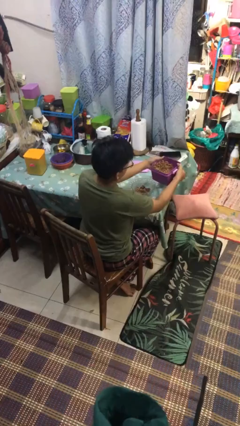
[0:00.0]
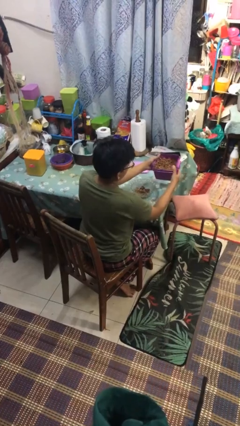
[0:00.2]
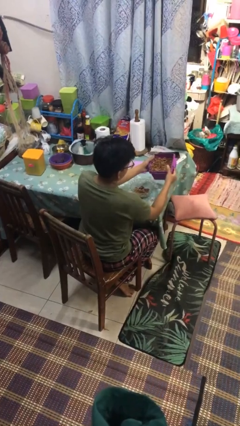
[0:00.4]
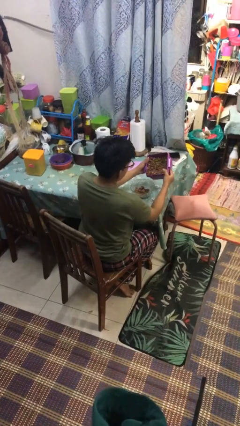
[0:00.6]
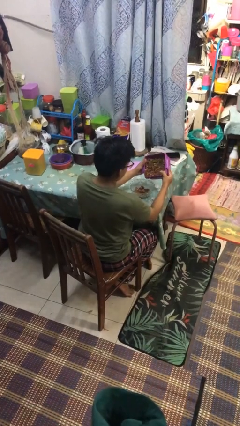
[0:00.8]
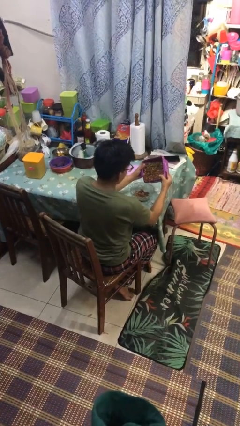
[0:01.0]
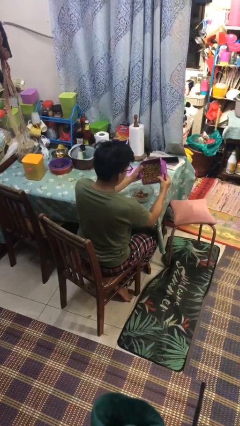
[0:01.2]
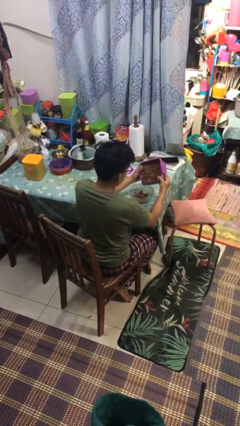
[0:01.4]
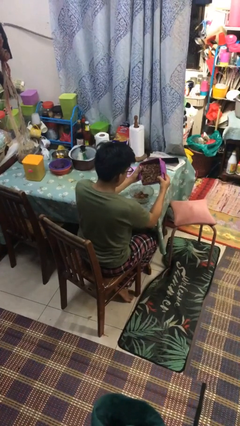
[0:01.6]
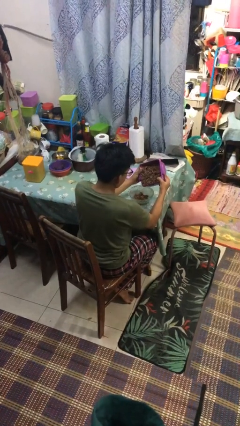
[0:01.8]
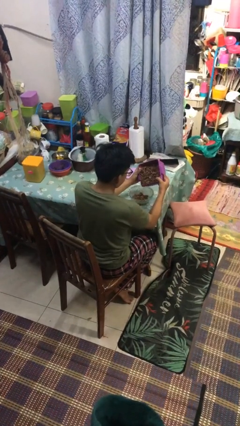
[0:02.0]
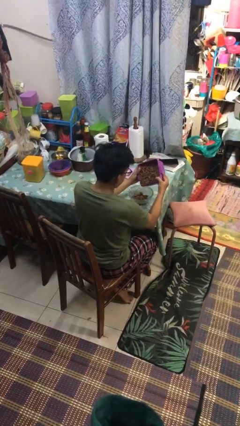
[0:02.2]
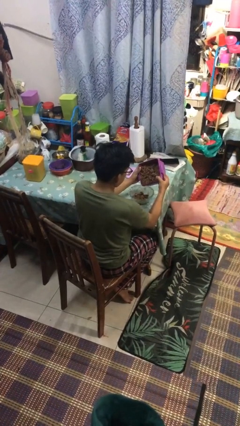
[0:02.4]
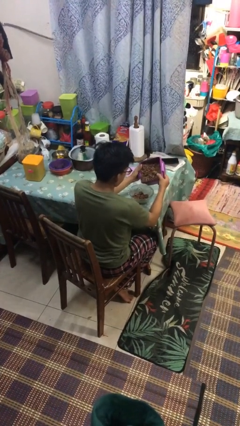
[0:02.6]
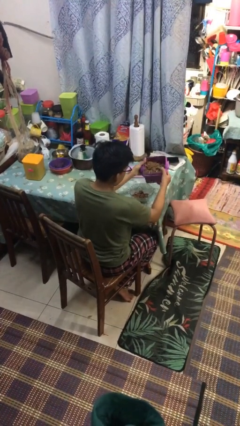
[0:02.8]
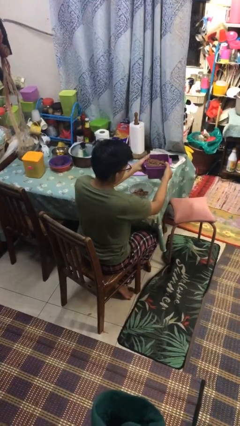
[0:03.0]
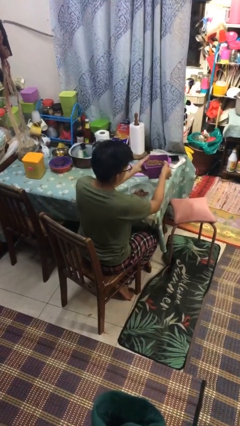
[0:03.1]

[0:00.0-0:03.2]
person pours into bowl

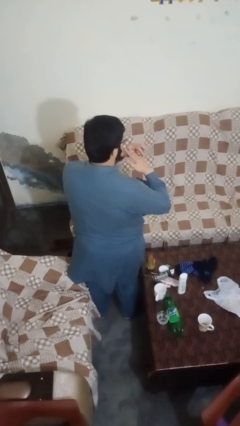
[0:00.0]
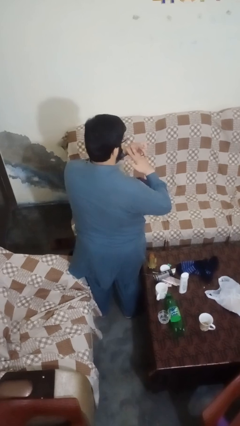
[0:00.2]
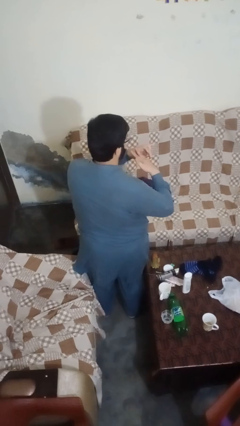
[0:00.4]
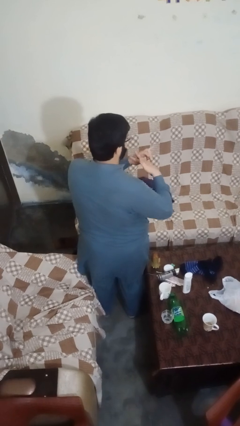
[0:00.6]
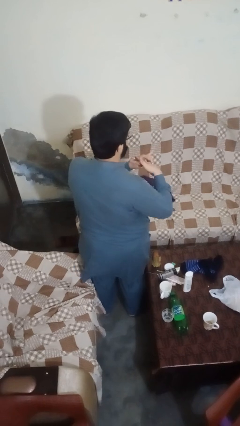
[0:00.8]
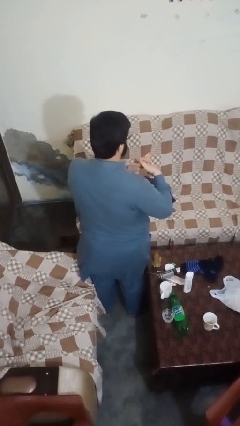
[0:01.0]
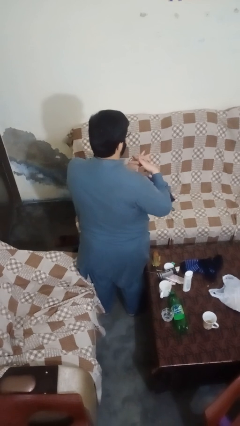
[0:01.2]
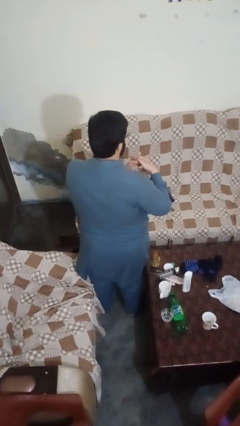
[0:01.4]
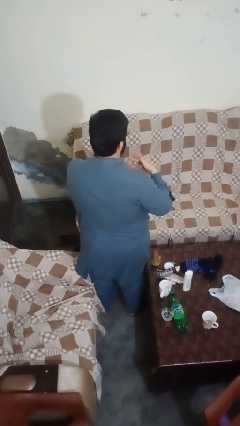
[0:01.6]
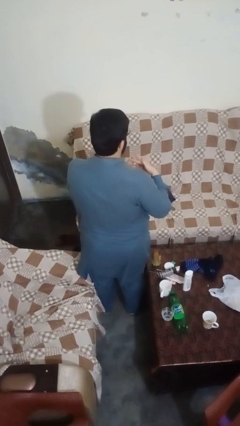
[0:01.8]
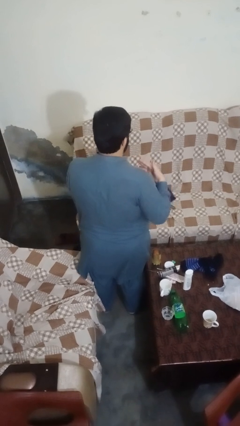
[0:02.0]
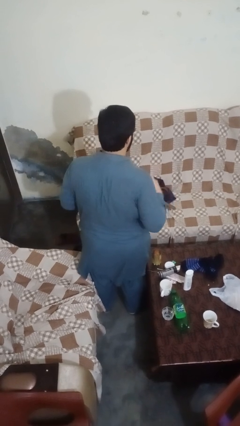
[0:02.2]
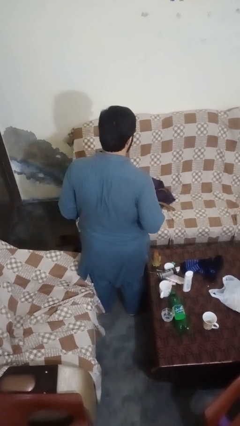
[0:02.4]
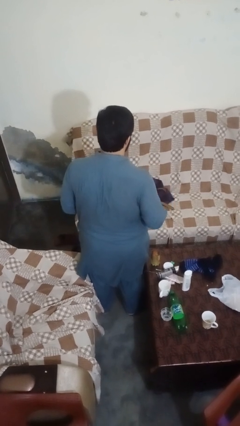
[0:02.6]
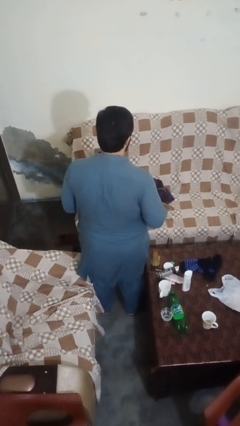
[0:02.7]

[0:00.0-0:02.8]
person takes off ring

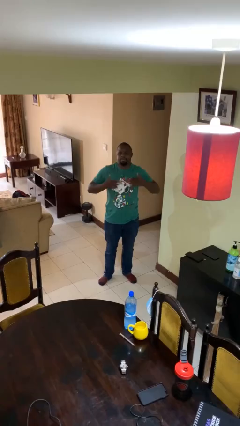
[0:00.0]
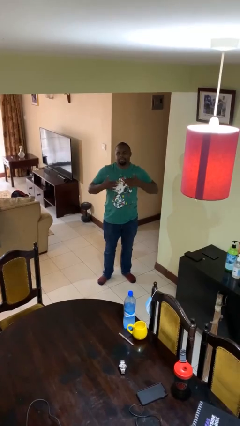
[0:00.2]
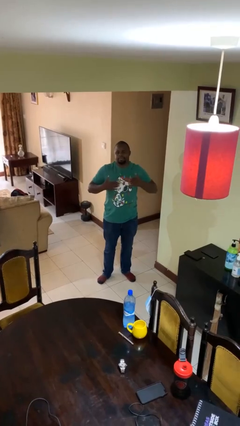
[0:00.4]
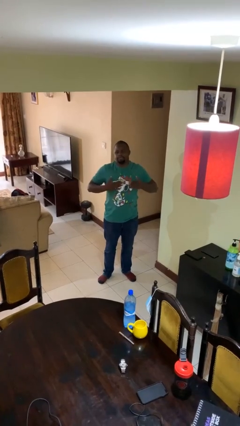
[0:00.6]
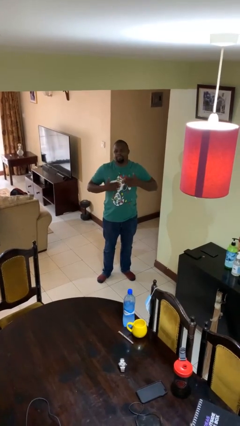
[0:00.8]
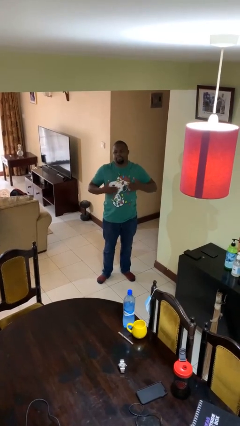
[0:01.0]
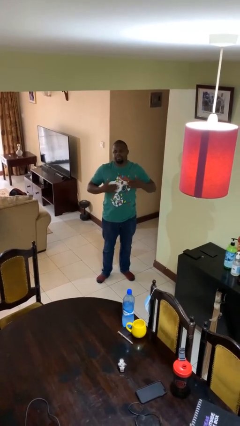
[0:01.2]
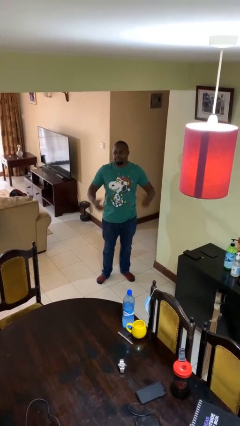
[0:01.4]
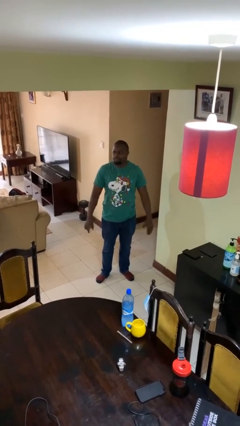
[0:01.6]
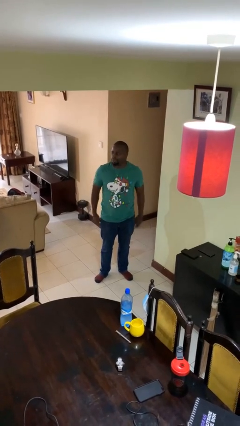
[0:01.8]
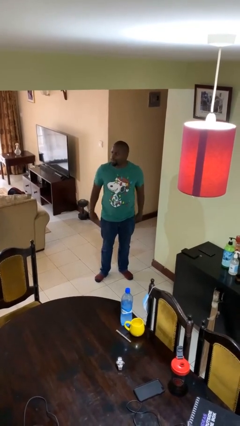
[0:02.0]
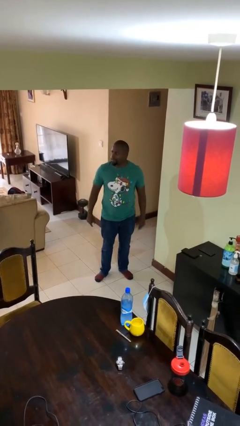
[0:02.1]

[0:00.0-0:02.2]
person drums on chest

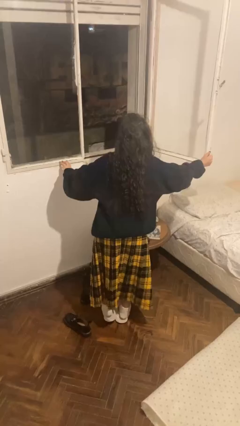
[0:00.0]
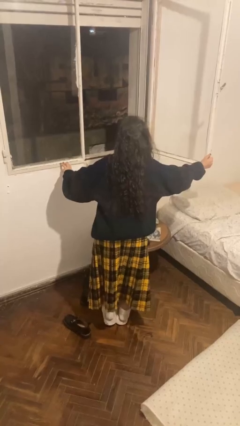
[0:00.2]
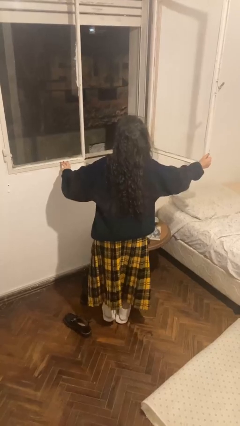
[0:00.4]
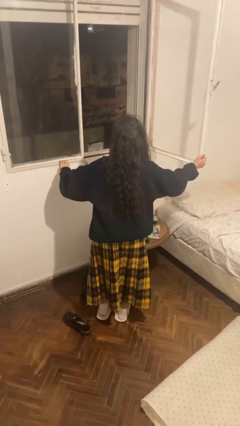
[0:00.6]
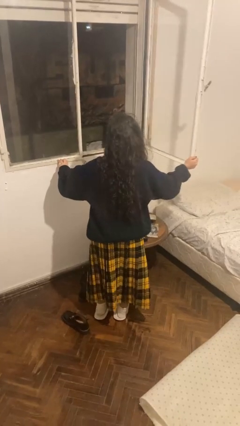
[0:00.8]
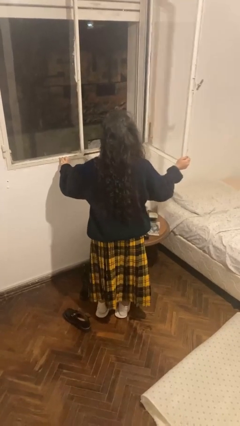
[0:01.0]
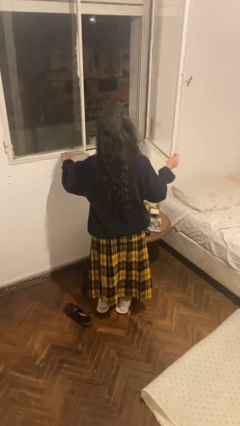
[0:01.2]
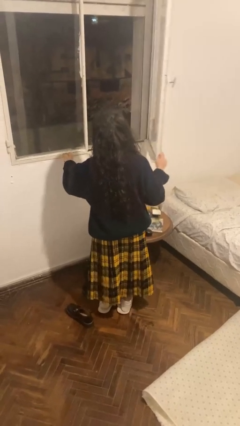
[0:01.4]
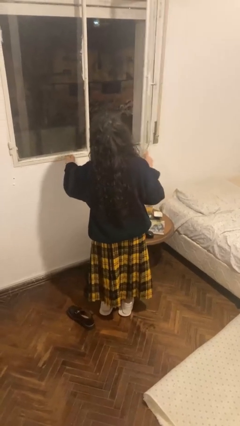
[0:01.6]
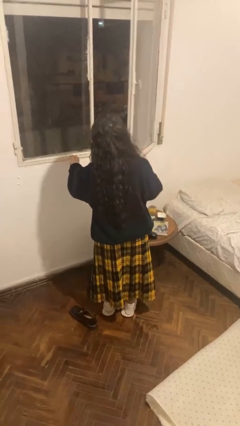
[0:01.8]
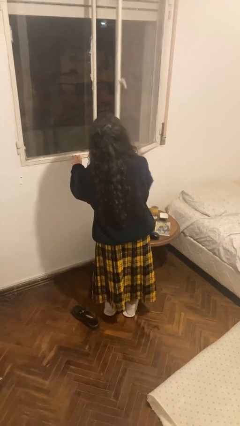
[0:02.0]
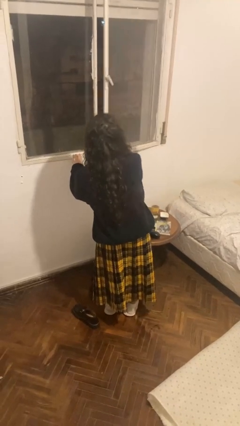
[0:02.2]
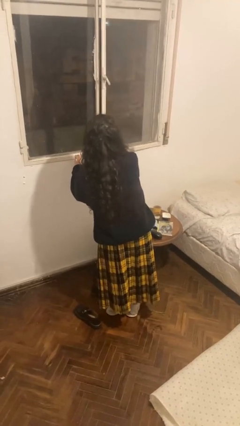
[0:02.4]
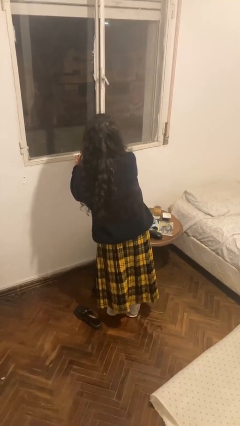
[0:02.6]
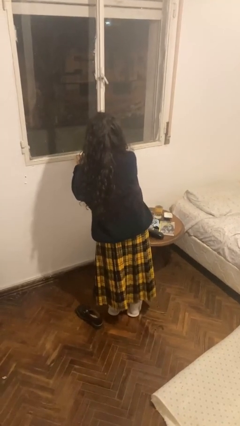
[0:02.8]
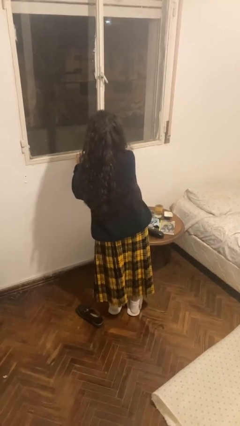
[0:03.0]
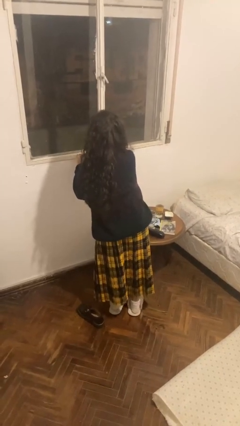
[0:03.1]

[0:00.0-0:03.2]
person closes home window

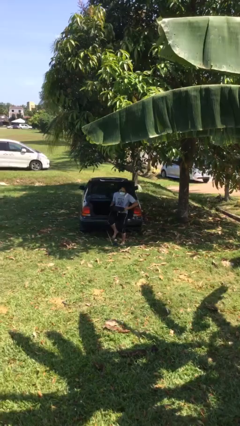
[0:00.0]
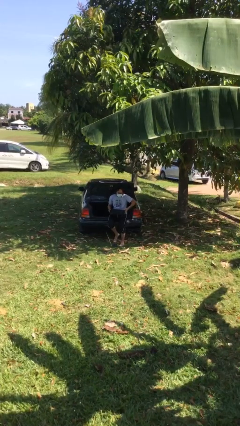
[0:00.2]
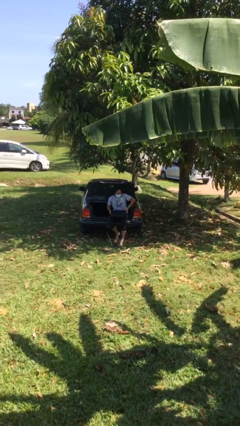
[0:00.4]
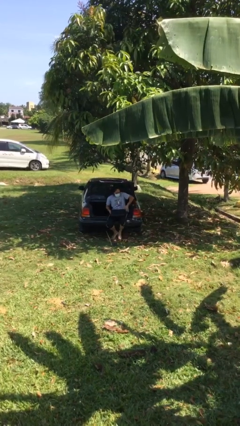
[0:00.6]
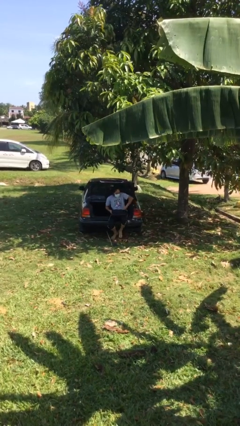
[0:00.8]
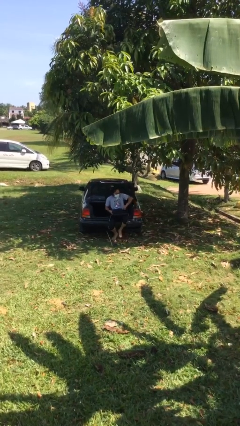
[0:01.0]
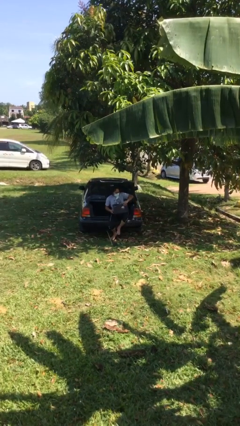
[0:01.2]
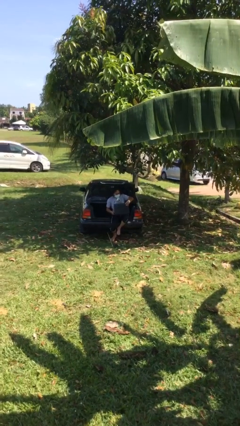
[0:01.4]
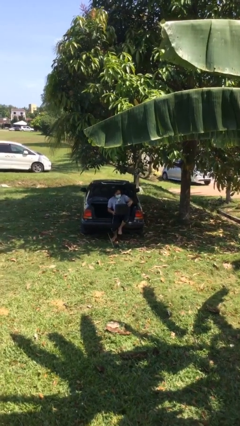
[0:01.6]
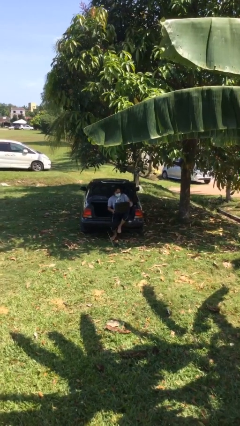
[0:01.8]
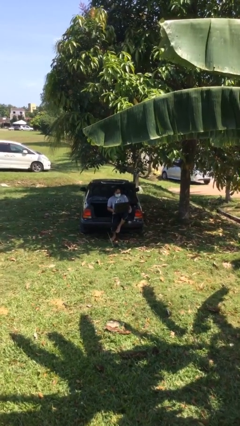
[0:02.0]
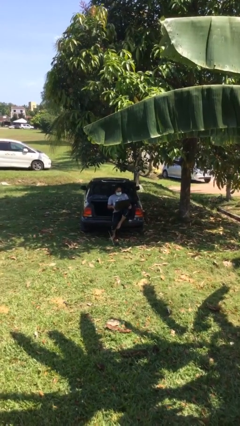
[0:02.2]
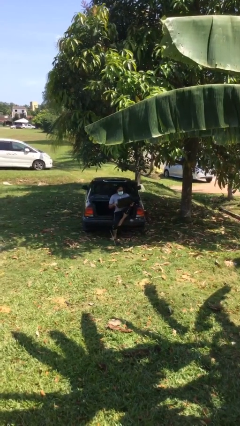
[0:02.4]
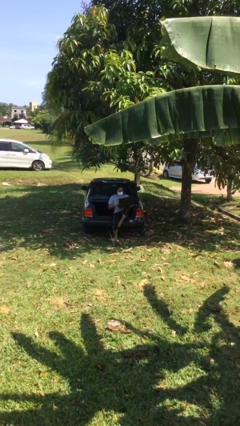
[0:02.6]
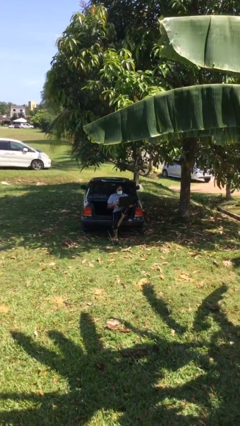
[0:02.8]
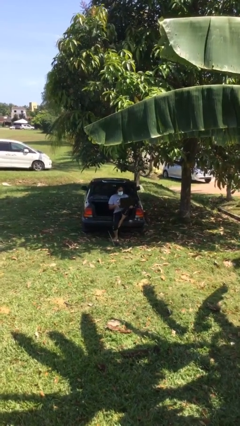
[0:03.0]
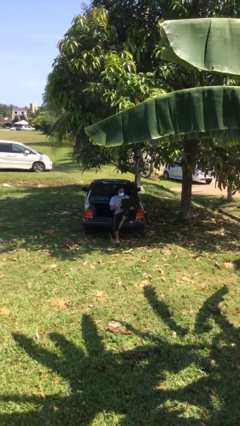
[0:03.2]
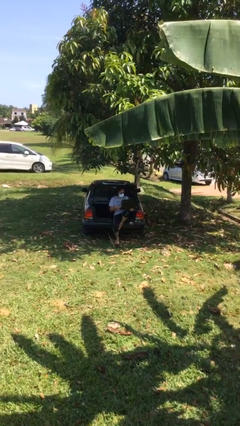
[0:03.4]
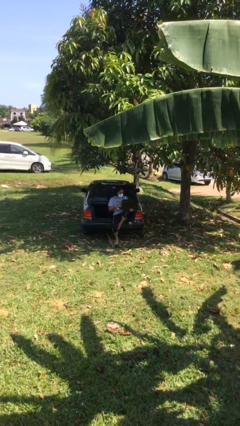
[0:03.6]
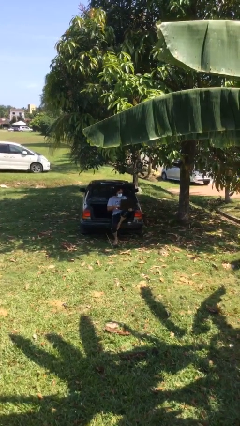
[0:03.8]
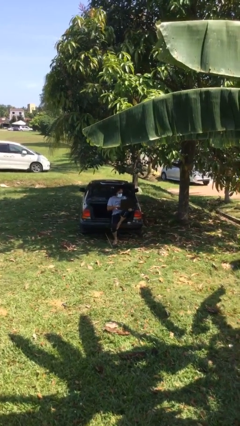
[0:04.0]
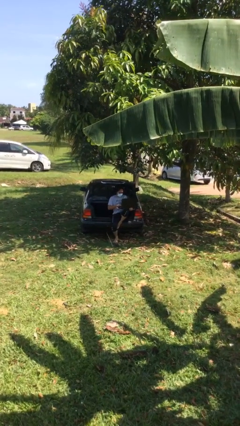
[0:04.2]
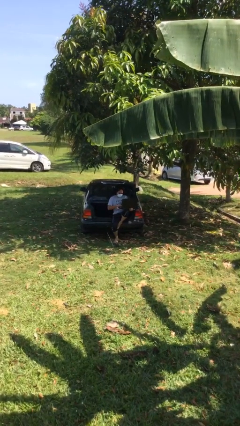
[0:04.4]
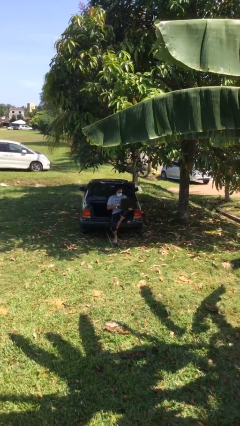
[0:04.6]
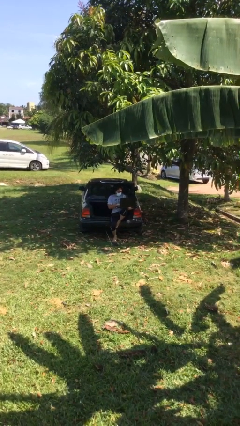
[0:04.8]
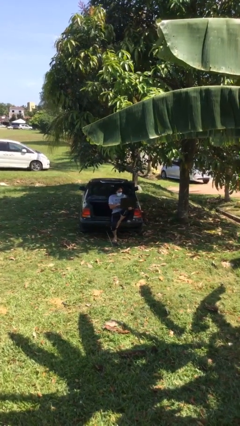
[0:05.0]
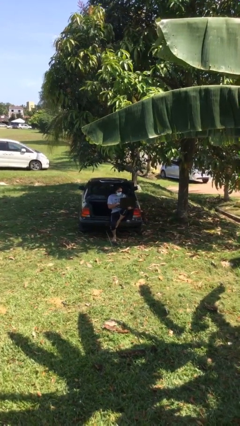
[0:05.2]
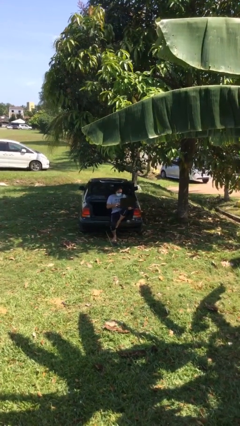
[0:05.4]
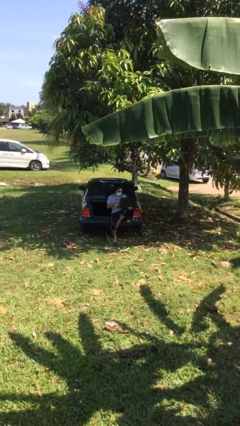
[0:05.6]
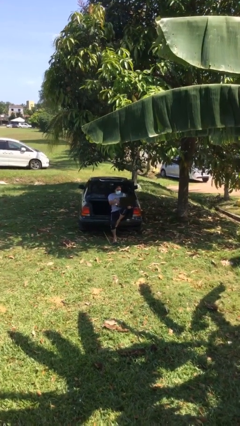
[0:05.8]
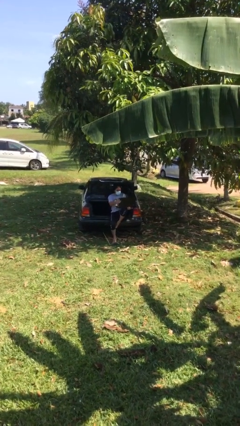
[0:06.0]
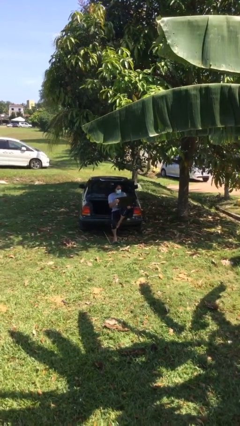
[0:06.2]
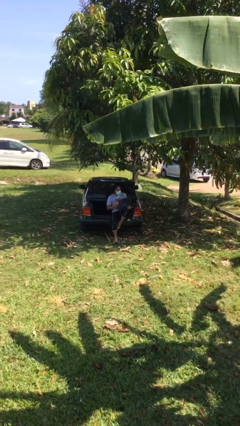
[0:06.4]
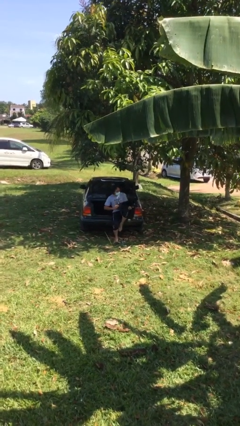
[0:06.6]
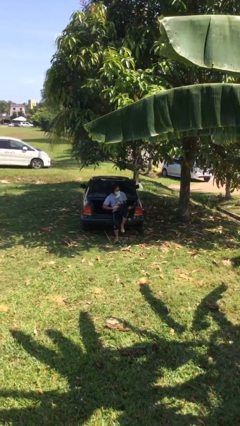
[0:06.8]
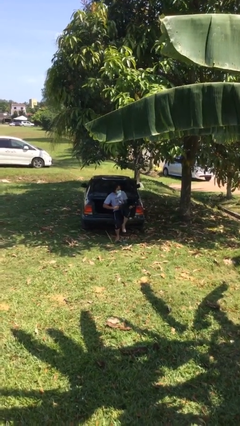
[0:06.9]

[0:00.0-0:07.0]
person interacts with laptop
